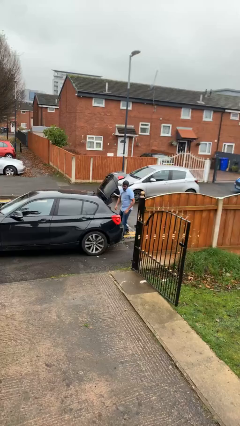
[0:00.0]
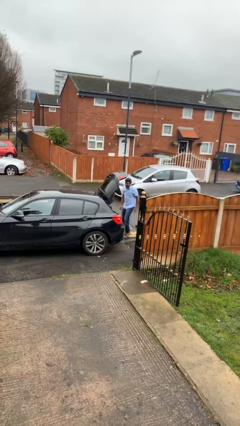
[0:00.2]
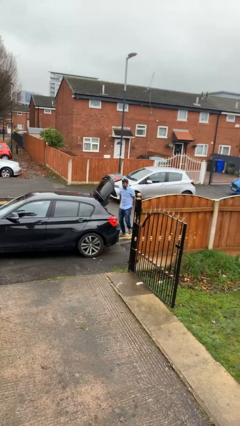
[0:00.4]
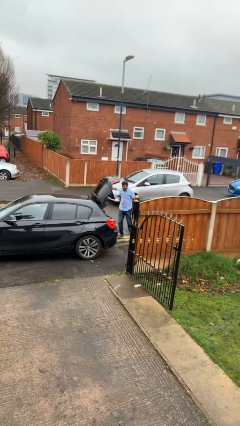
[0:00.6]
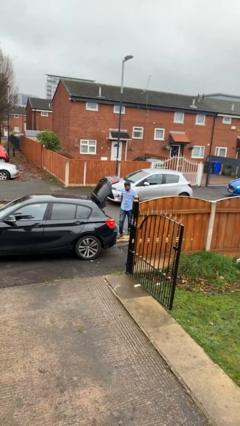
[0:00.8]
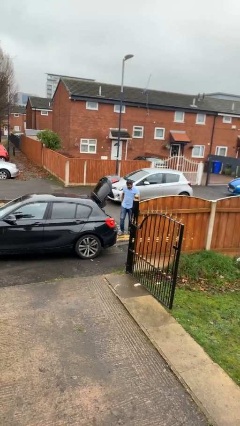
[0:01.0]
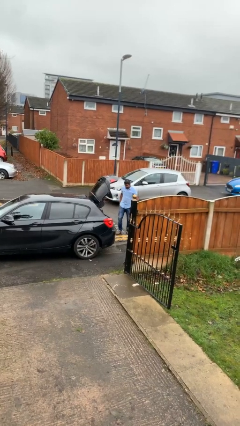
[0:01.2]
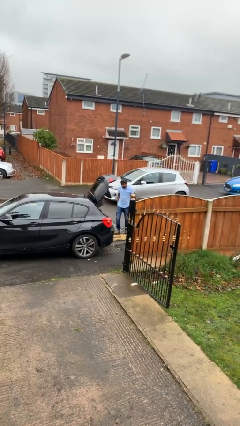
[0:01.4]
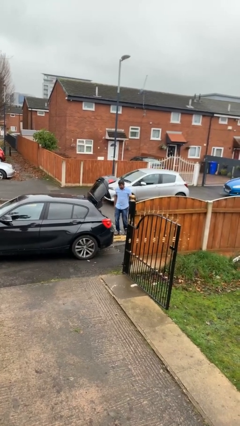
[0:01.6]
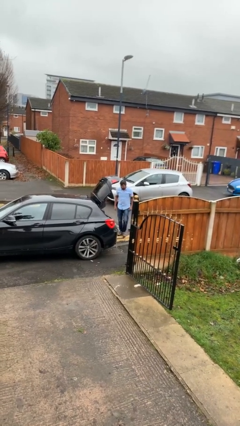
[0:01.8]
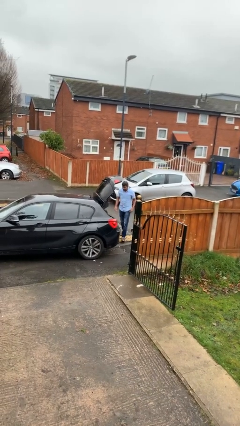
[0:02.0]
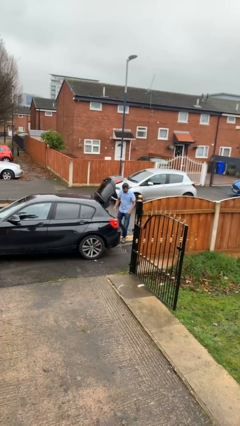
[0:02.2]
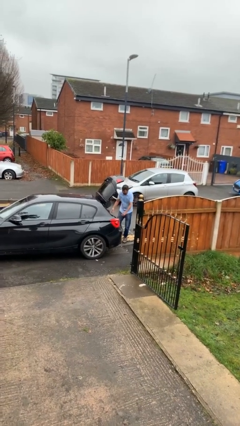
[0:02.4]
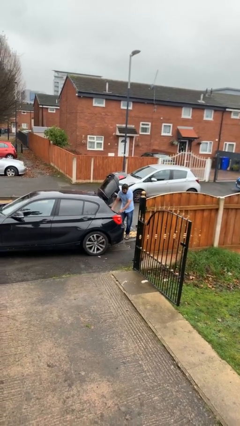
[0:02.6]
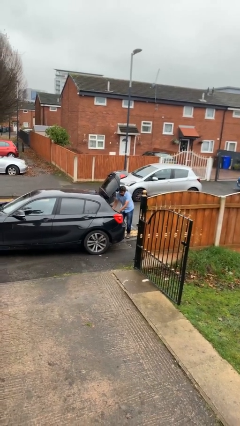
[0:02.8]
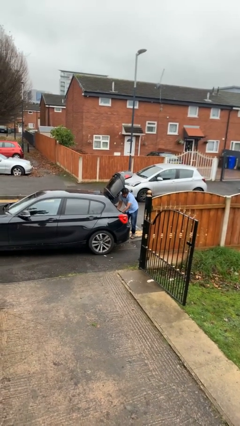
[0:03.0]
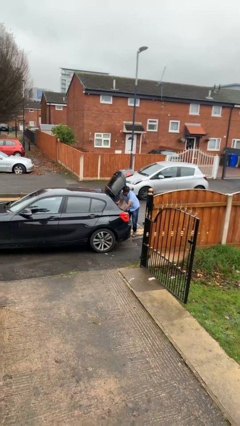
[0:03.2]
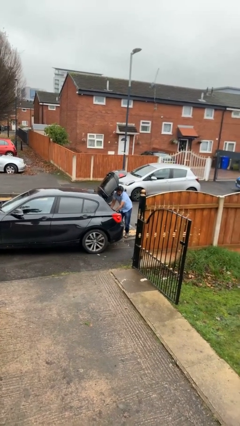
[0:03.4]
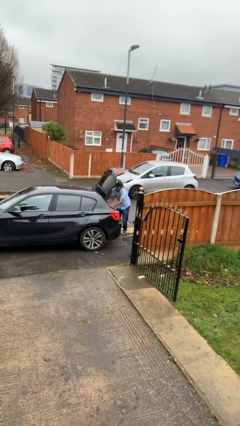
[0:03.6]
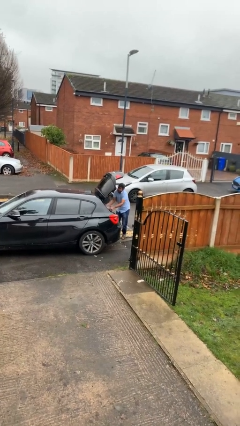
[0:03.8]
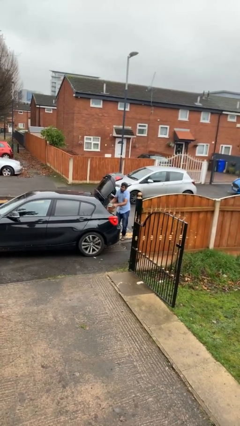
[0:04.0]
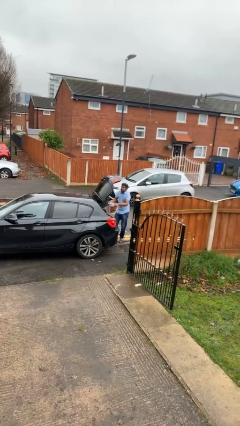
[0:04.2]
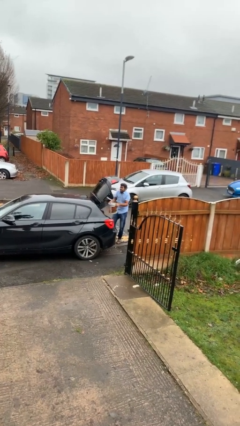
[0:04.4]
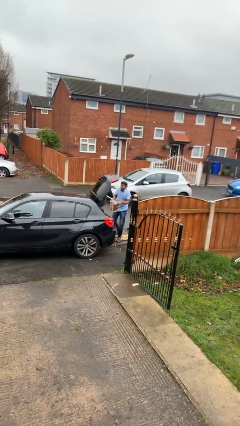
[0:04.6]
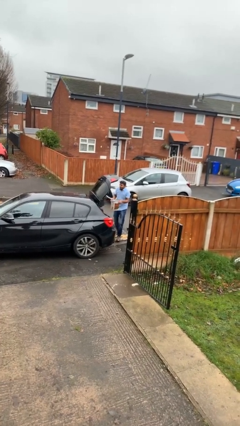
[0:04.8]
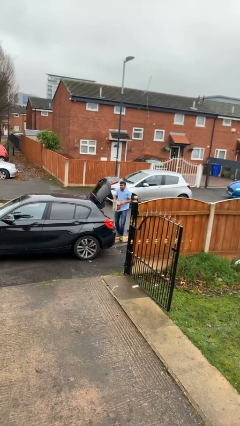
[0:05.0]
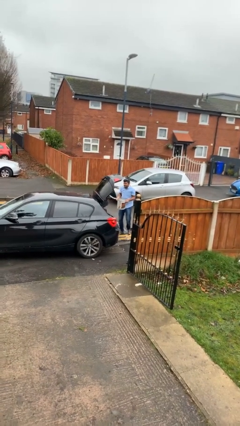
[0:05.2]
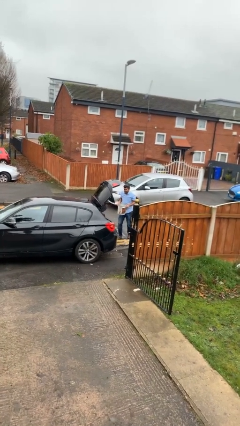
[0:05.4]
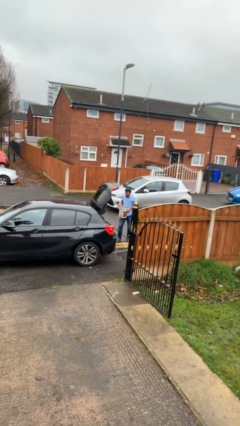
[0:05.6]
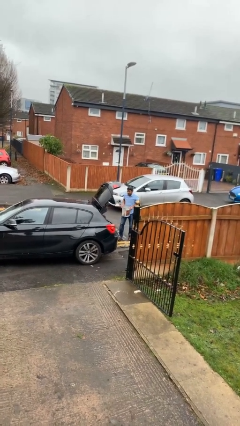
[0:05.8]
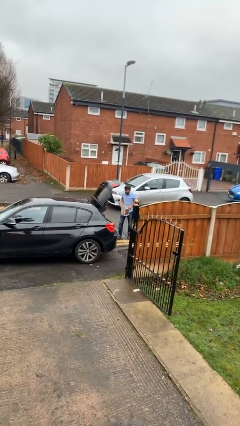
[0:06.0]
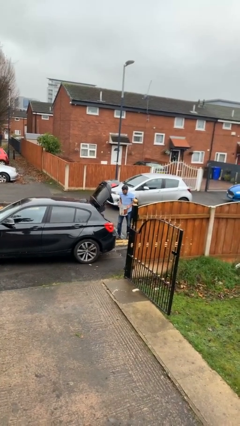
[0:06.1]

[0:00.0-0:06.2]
person unloads car

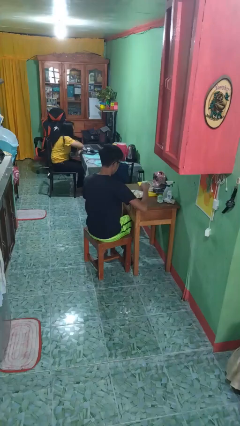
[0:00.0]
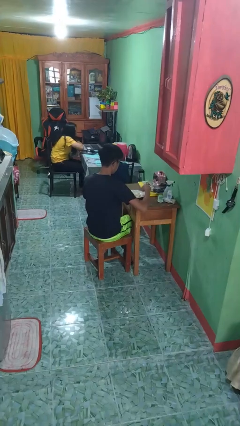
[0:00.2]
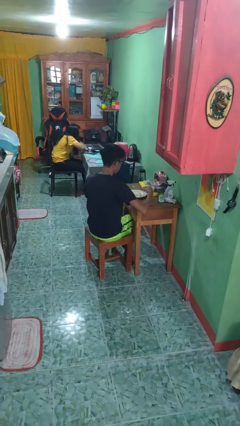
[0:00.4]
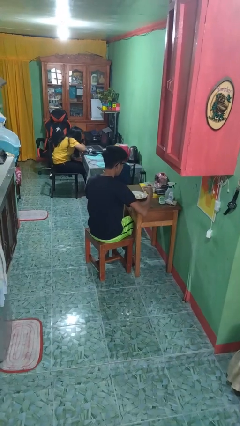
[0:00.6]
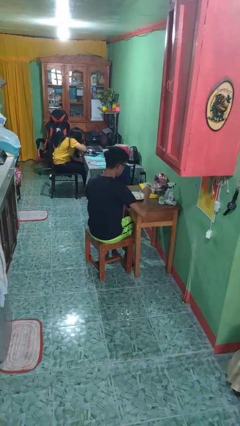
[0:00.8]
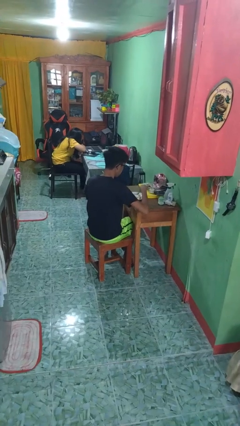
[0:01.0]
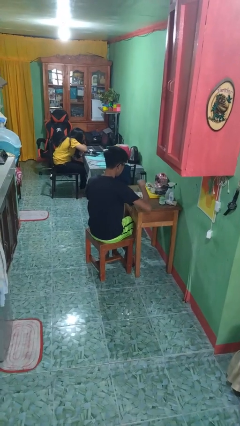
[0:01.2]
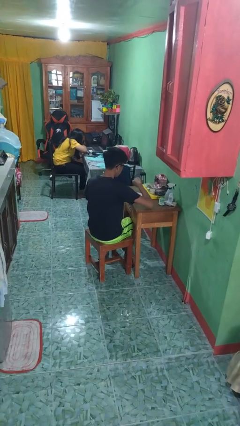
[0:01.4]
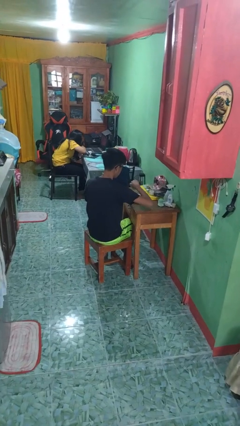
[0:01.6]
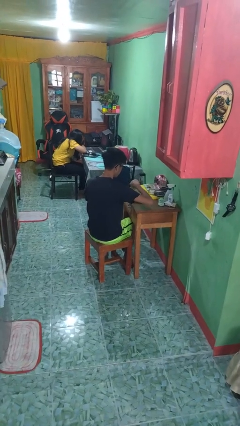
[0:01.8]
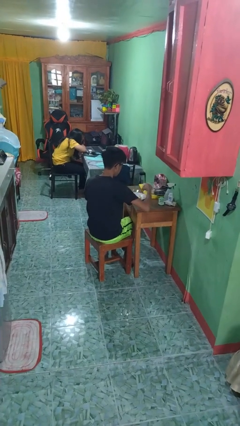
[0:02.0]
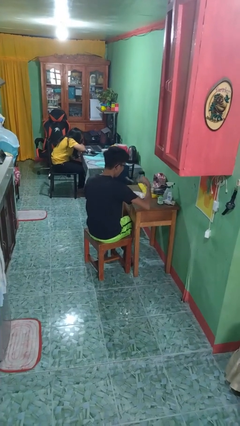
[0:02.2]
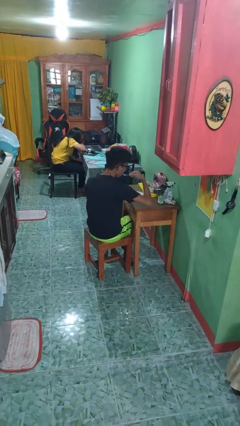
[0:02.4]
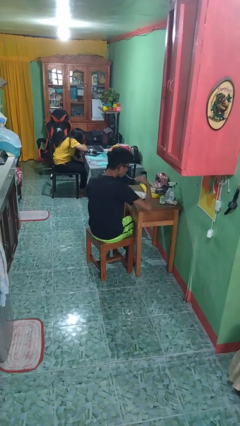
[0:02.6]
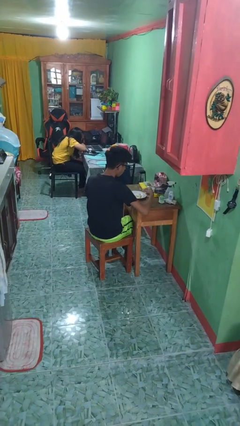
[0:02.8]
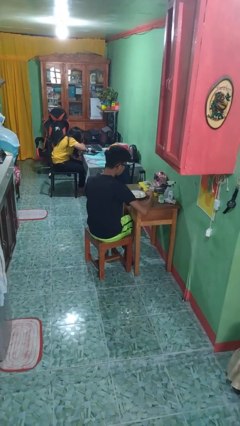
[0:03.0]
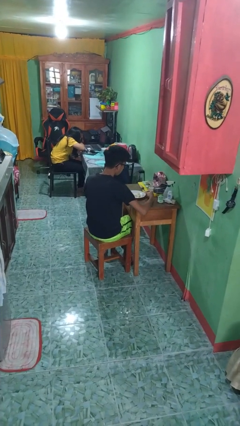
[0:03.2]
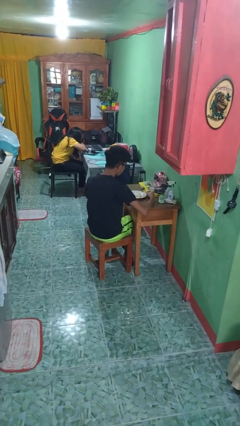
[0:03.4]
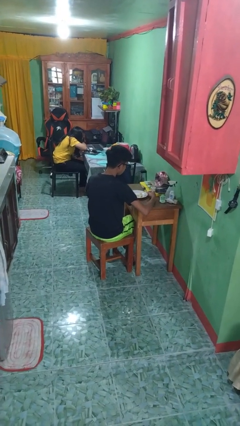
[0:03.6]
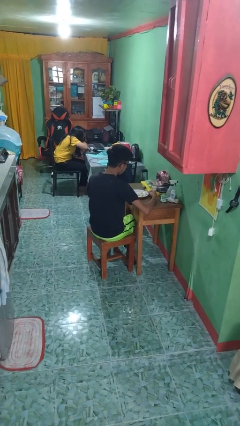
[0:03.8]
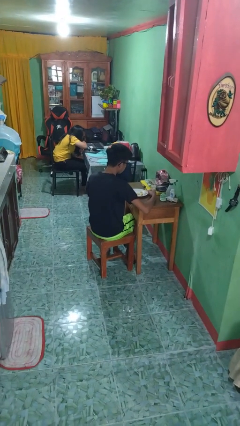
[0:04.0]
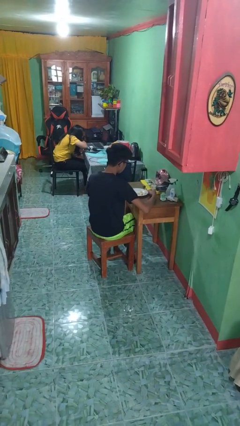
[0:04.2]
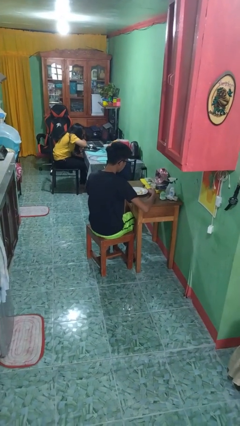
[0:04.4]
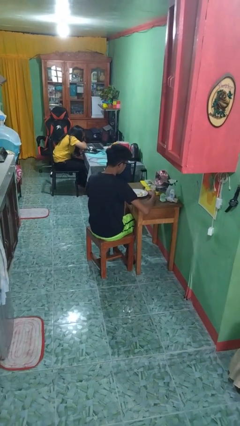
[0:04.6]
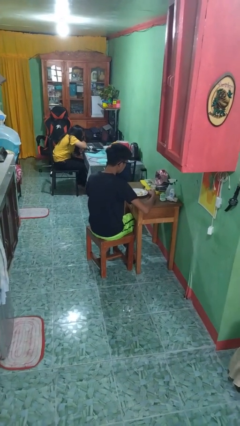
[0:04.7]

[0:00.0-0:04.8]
person eats with utensil

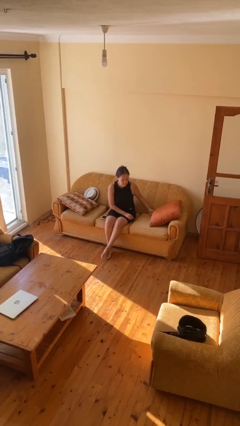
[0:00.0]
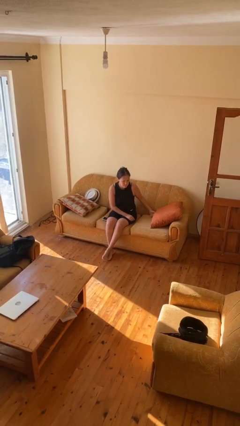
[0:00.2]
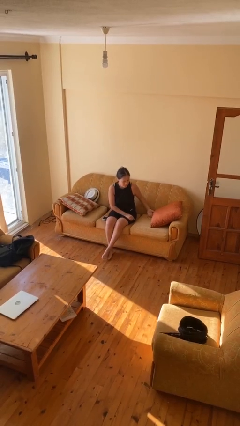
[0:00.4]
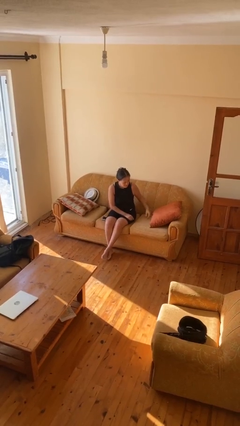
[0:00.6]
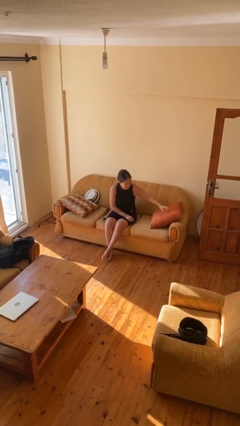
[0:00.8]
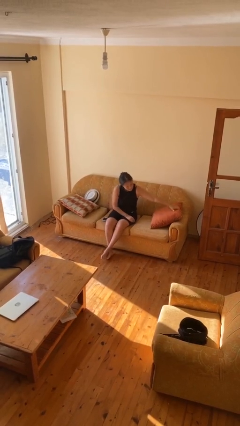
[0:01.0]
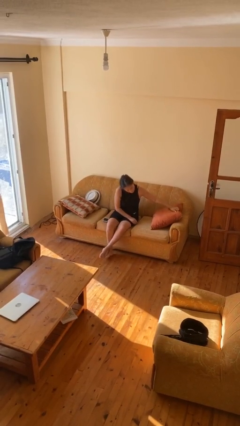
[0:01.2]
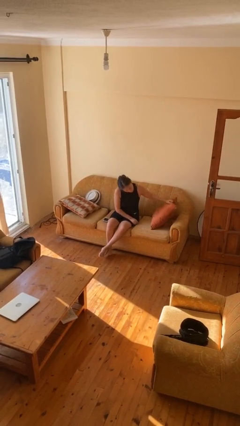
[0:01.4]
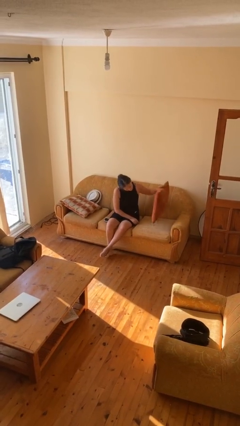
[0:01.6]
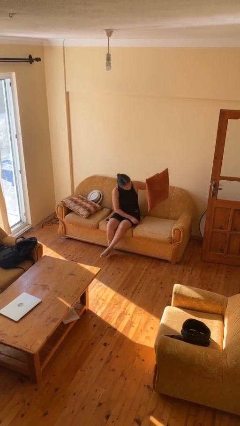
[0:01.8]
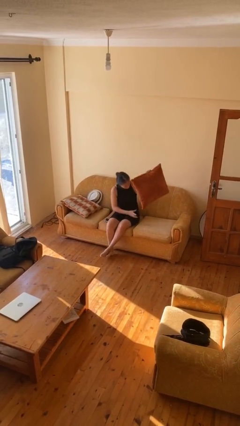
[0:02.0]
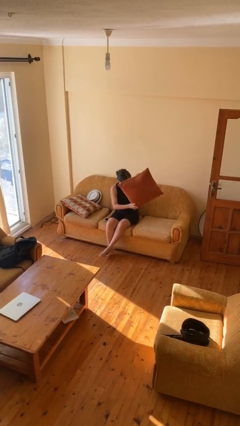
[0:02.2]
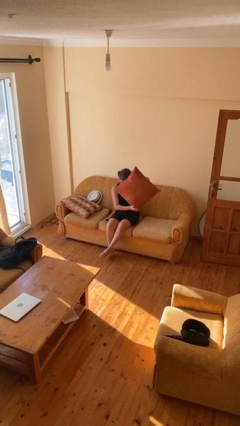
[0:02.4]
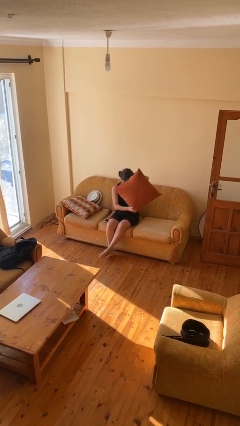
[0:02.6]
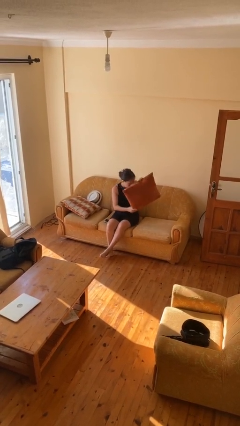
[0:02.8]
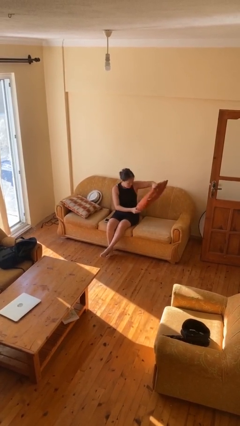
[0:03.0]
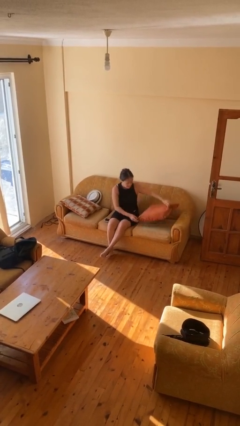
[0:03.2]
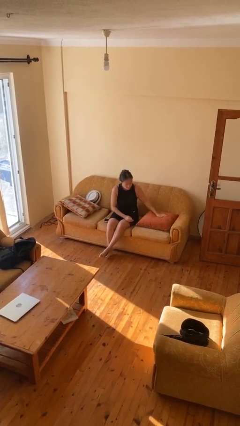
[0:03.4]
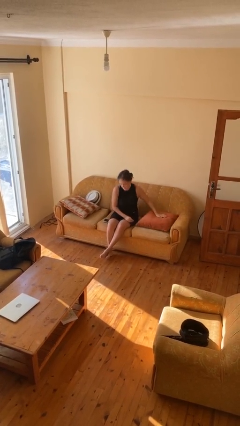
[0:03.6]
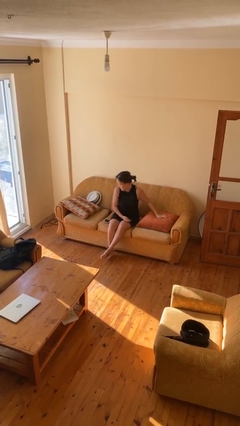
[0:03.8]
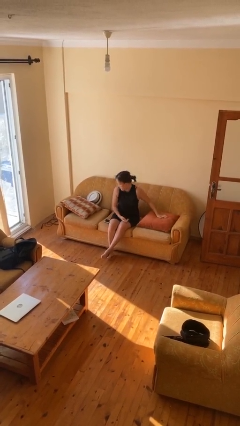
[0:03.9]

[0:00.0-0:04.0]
person searches in couch

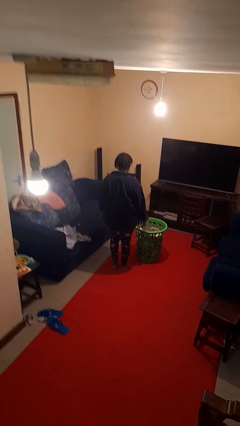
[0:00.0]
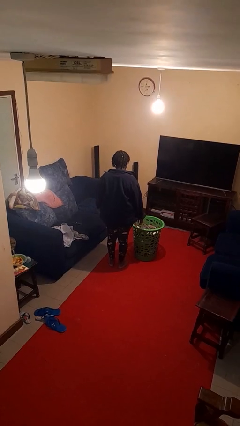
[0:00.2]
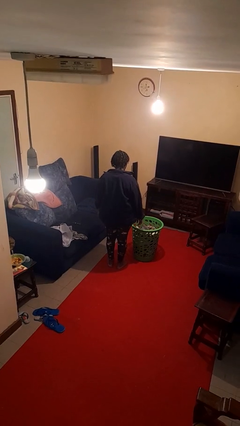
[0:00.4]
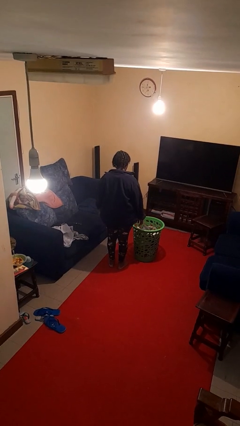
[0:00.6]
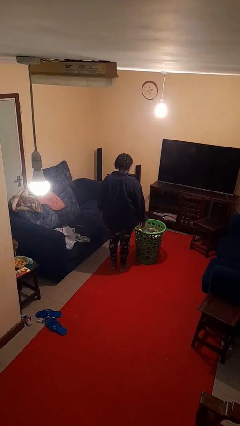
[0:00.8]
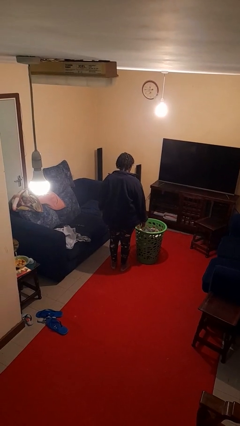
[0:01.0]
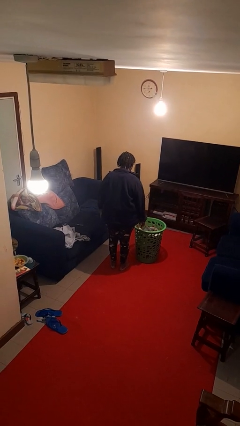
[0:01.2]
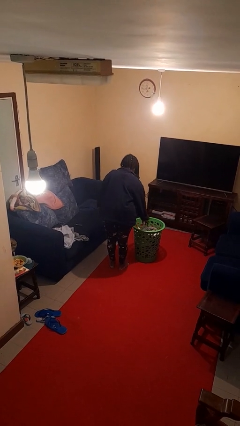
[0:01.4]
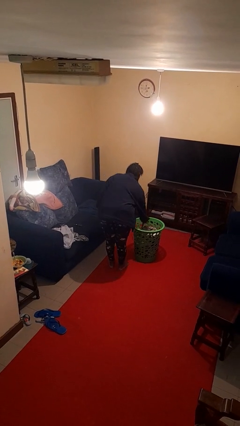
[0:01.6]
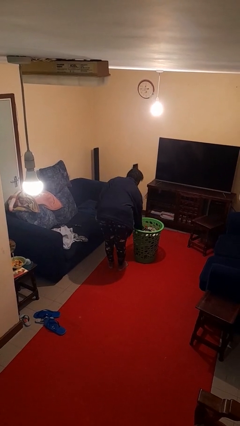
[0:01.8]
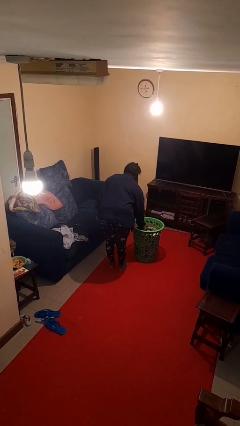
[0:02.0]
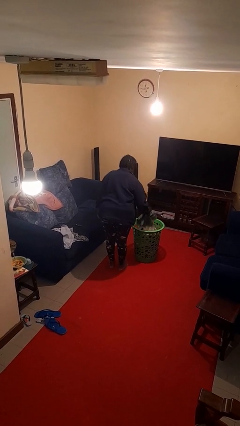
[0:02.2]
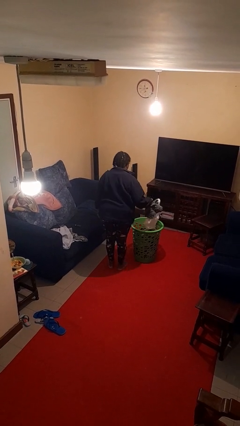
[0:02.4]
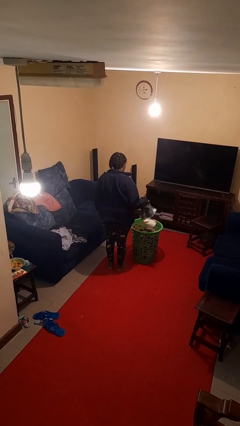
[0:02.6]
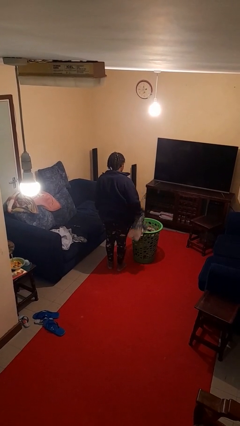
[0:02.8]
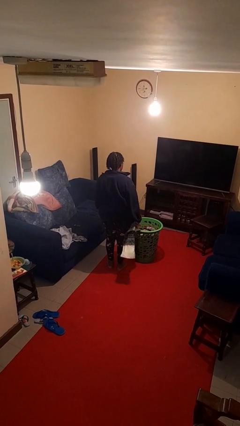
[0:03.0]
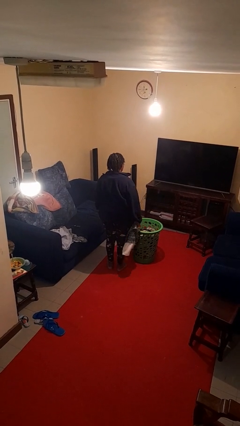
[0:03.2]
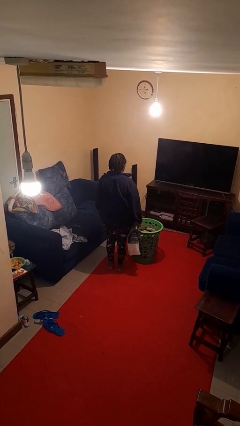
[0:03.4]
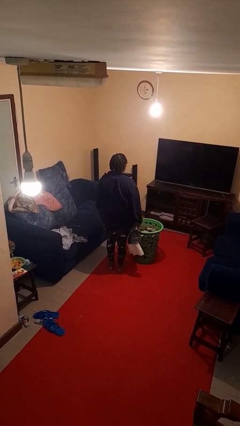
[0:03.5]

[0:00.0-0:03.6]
person takes object from basket
